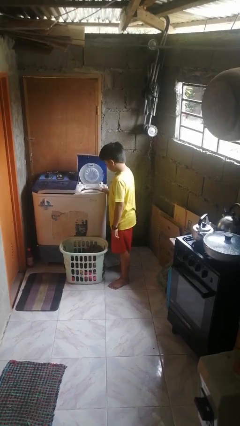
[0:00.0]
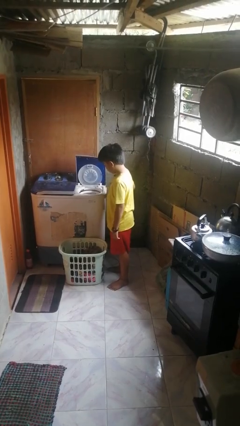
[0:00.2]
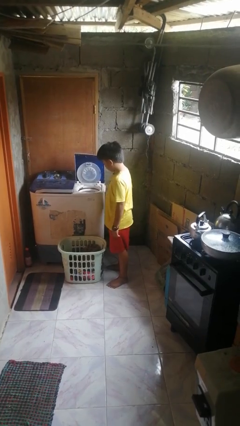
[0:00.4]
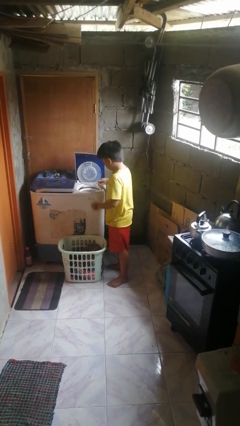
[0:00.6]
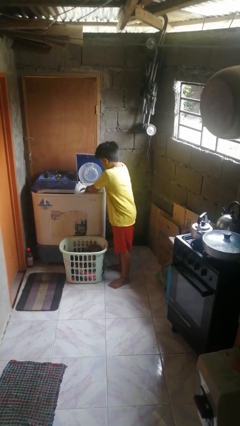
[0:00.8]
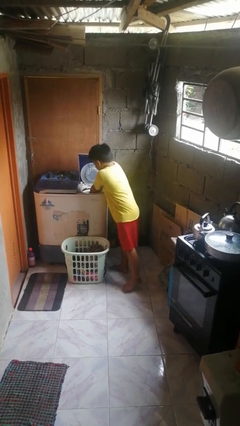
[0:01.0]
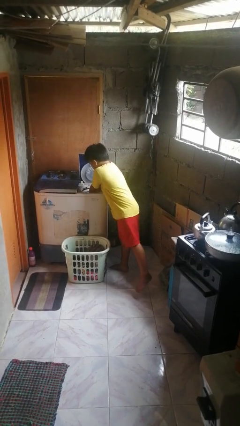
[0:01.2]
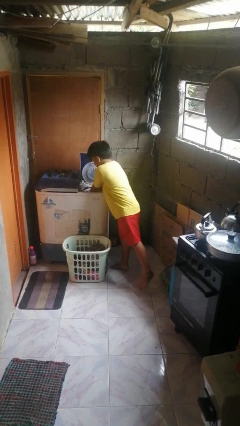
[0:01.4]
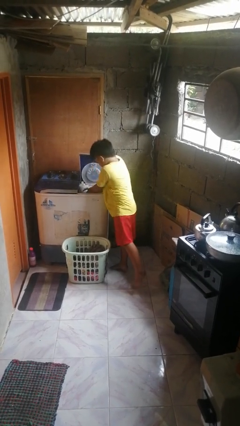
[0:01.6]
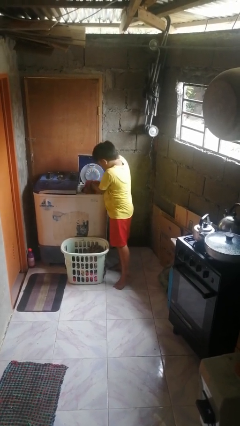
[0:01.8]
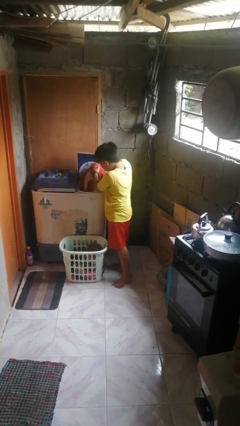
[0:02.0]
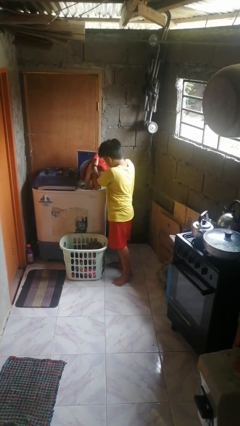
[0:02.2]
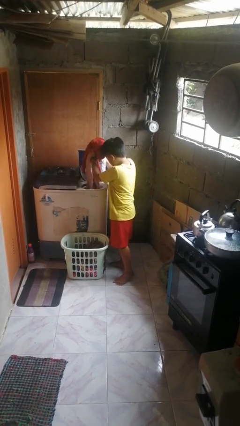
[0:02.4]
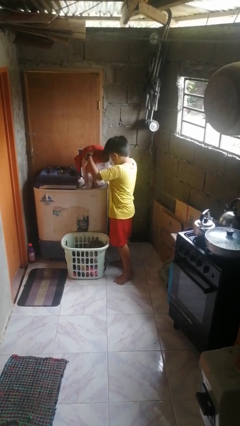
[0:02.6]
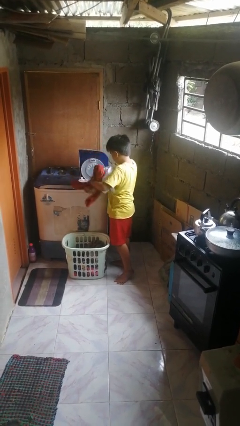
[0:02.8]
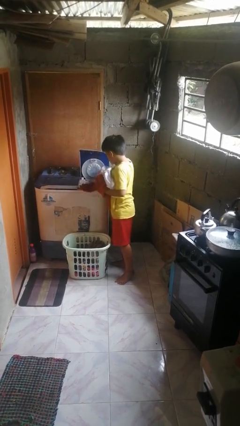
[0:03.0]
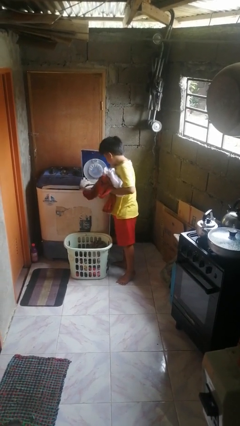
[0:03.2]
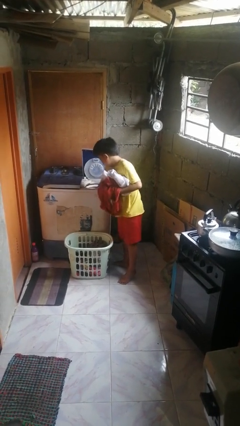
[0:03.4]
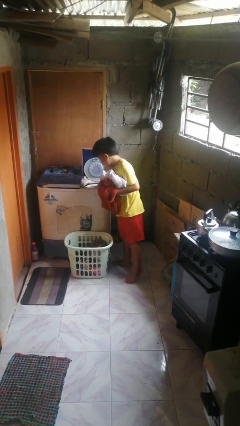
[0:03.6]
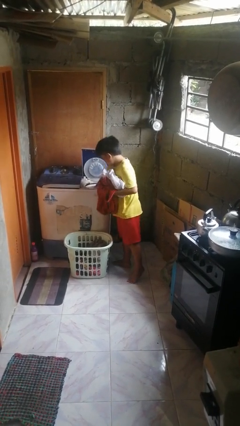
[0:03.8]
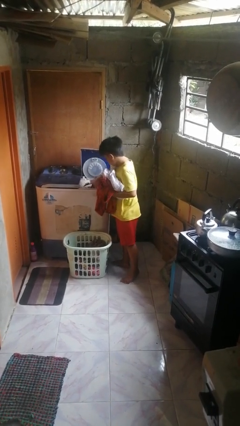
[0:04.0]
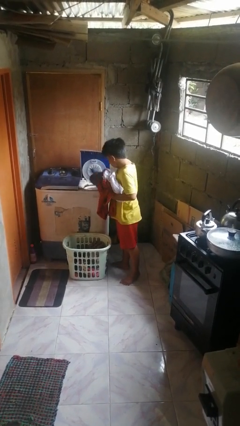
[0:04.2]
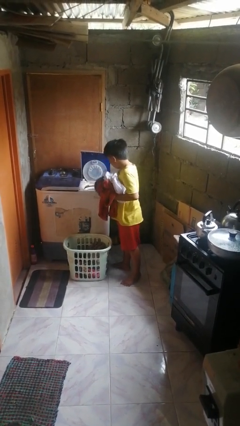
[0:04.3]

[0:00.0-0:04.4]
person unloads dryer

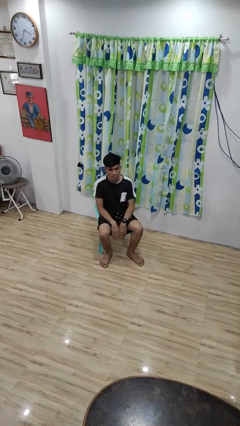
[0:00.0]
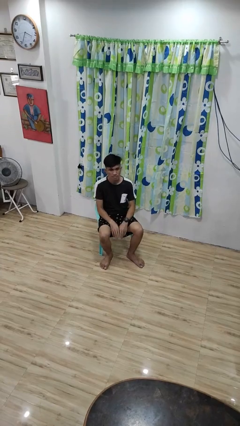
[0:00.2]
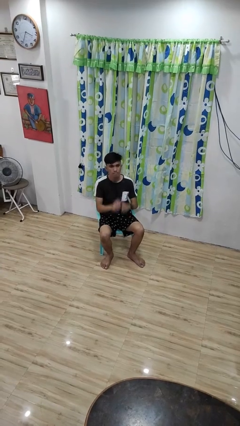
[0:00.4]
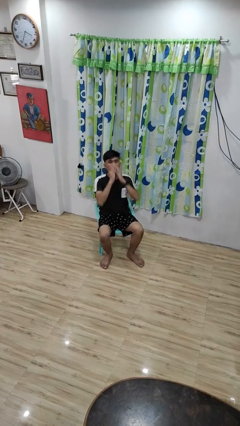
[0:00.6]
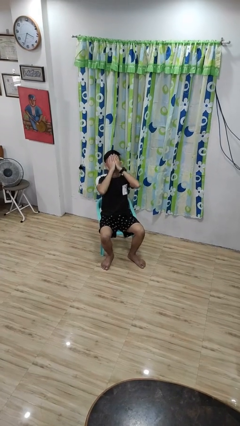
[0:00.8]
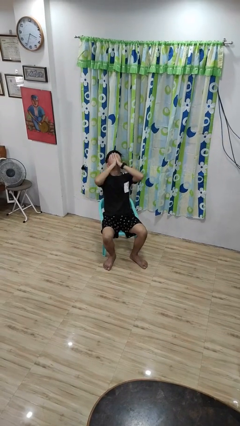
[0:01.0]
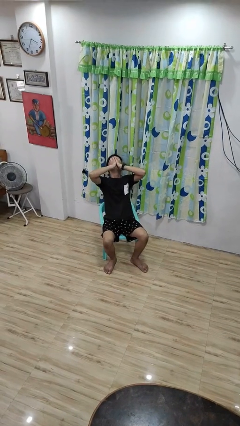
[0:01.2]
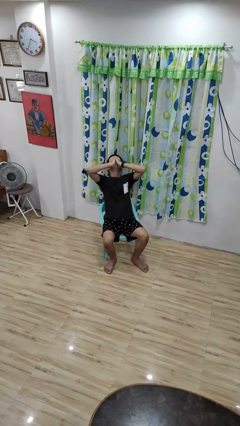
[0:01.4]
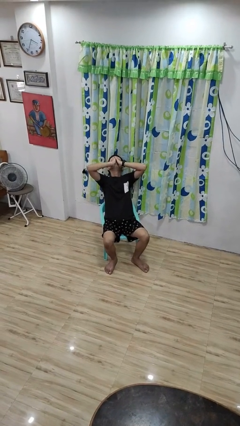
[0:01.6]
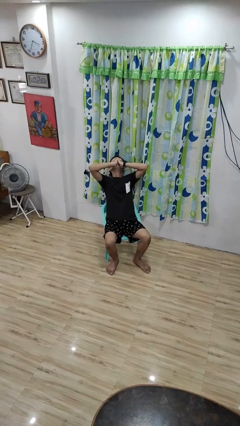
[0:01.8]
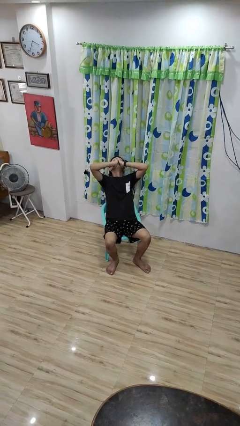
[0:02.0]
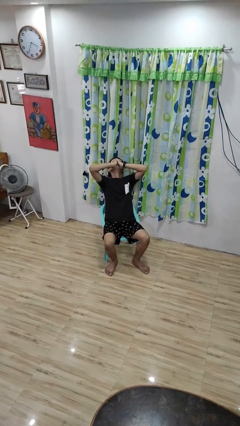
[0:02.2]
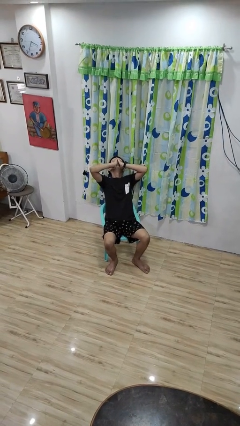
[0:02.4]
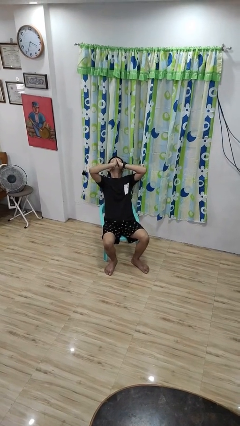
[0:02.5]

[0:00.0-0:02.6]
person covers face with hands

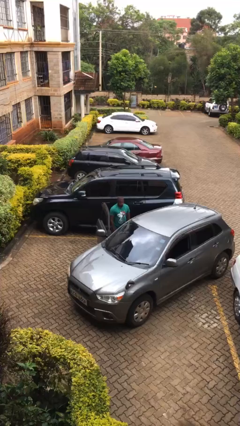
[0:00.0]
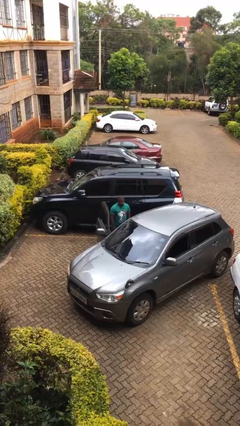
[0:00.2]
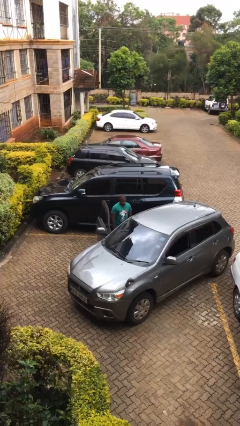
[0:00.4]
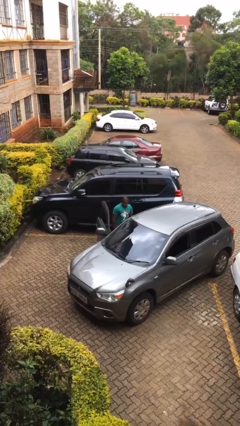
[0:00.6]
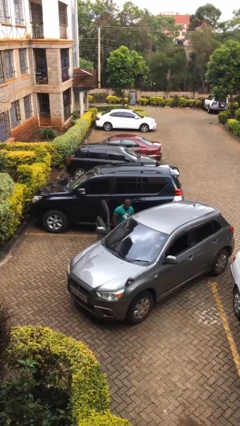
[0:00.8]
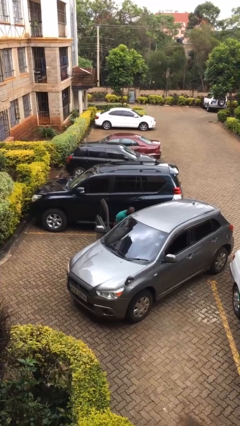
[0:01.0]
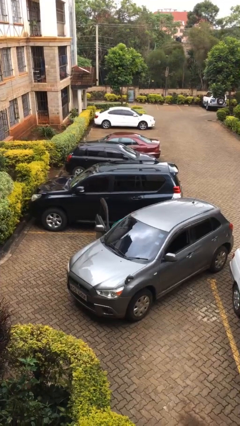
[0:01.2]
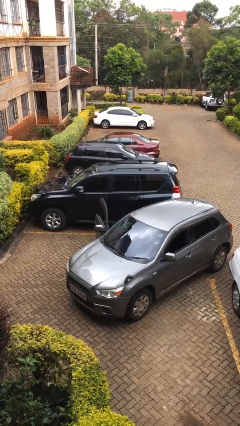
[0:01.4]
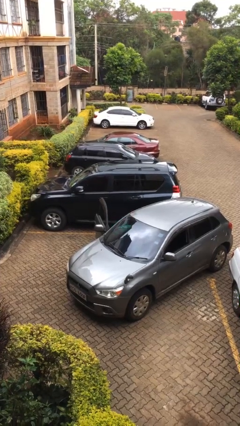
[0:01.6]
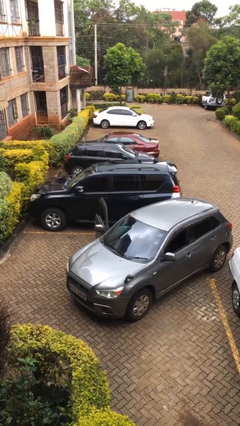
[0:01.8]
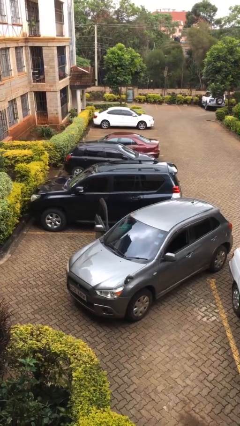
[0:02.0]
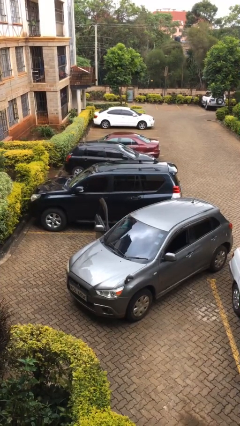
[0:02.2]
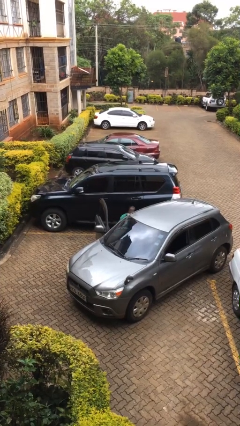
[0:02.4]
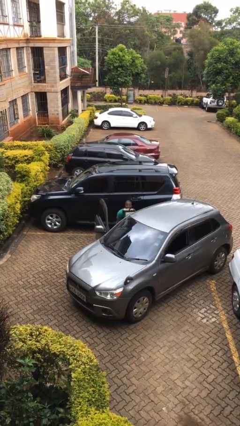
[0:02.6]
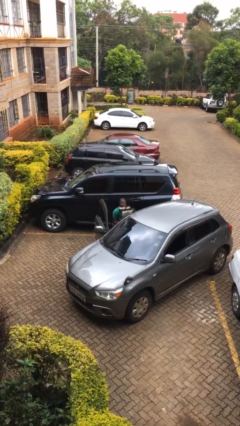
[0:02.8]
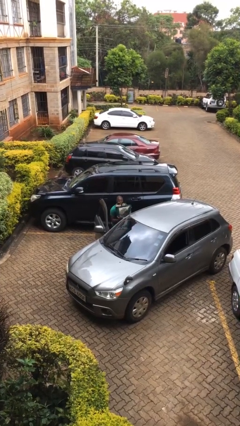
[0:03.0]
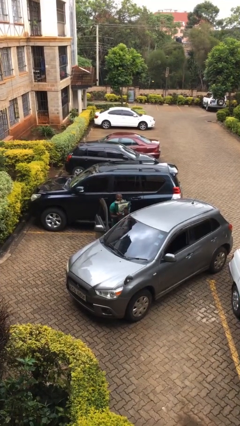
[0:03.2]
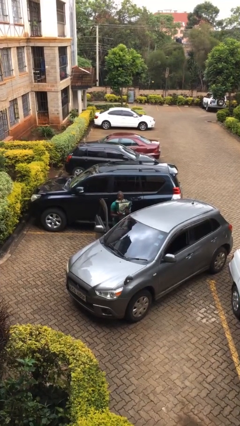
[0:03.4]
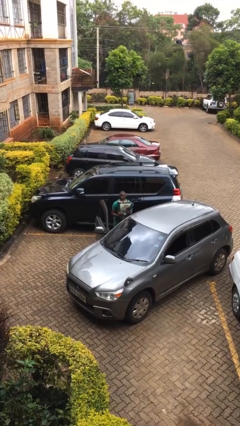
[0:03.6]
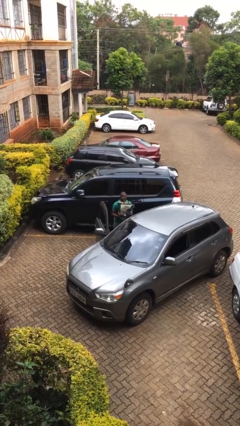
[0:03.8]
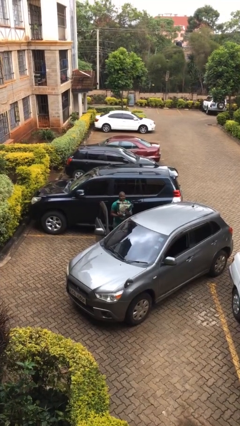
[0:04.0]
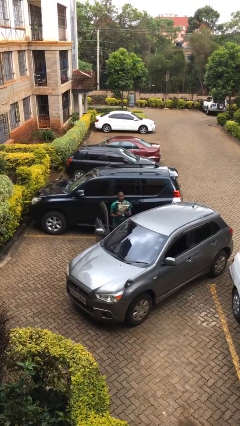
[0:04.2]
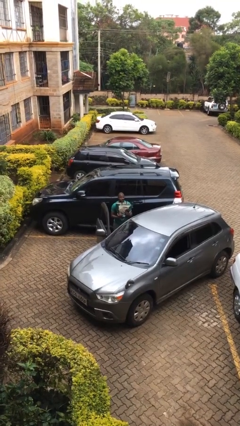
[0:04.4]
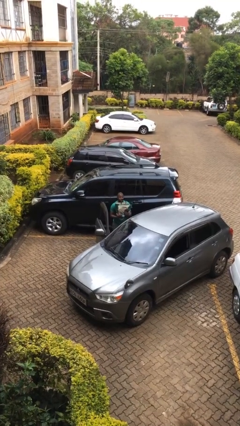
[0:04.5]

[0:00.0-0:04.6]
person unloads car

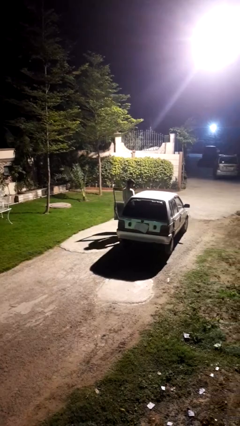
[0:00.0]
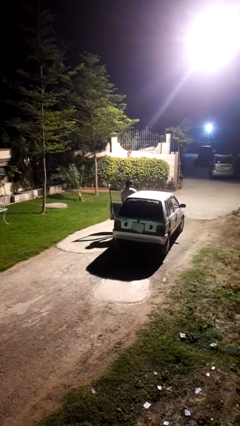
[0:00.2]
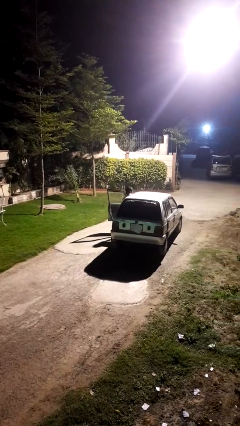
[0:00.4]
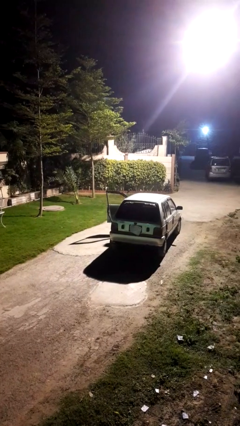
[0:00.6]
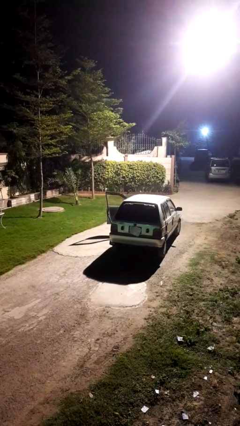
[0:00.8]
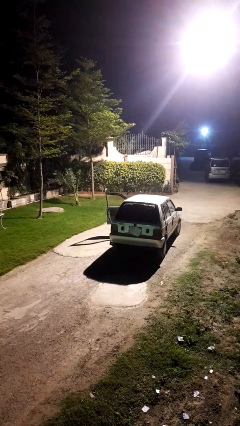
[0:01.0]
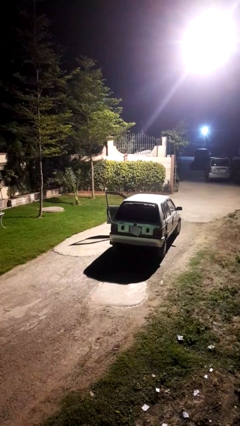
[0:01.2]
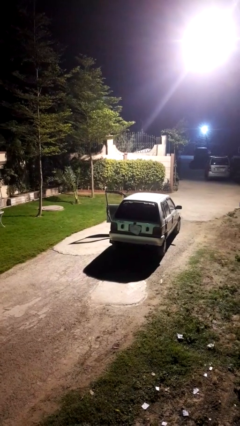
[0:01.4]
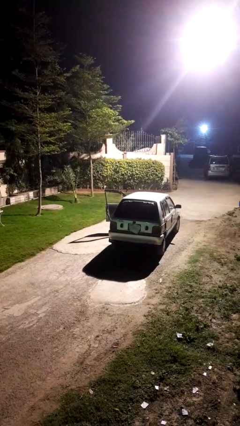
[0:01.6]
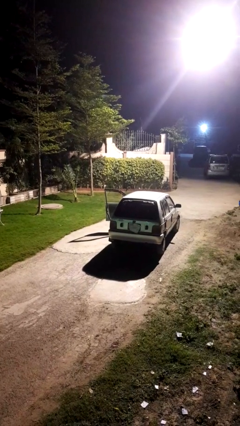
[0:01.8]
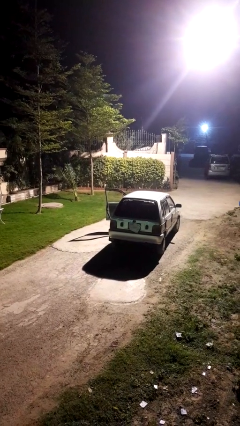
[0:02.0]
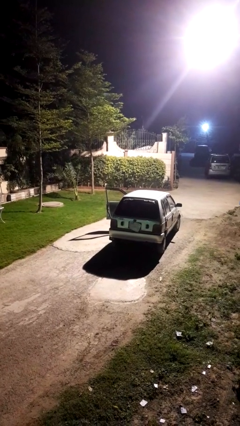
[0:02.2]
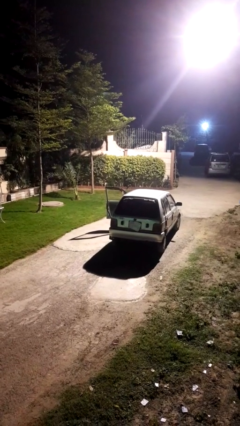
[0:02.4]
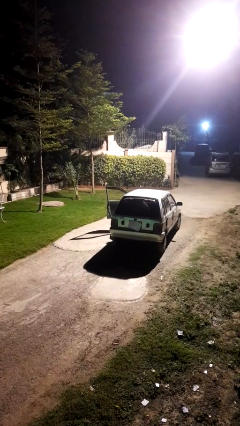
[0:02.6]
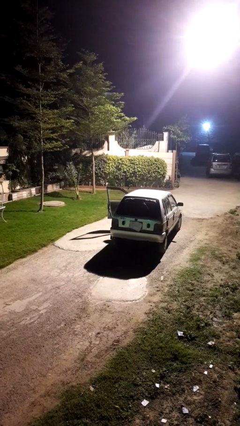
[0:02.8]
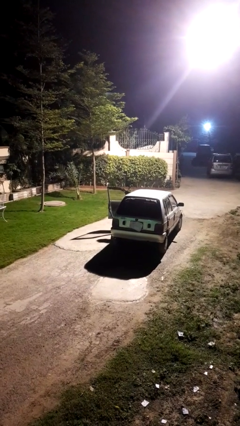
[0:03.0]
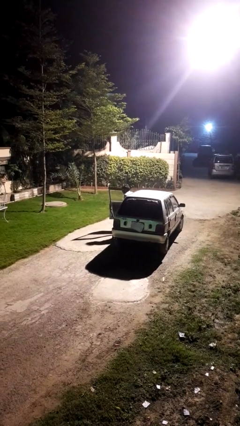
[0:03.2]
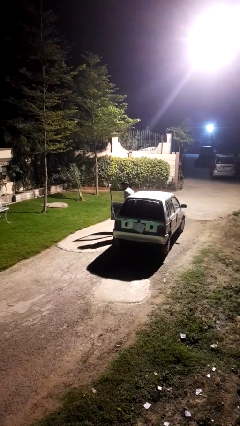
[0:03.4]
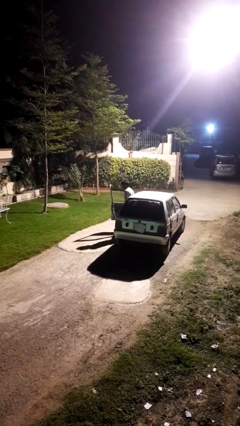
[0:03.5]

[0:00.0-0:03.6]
person enters car

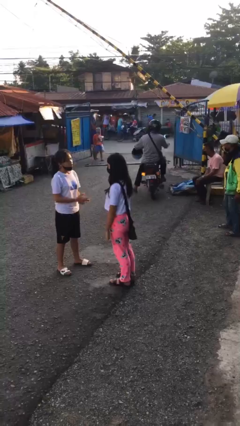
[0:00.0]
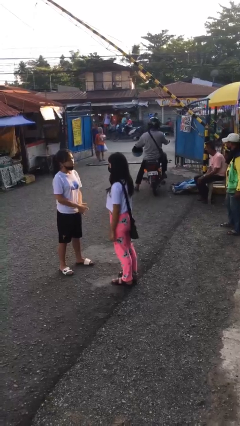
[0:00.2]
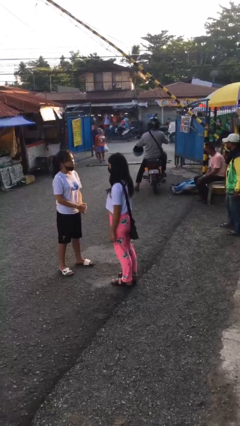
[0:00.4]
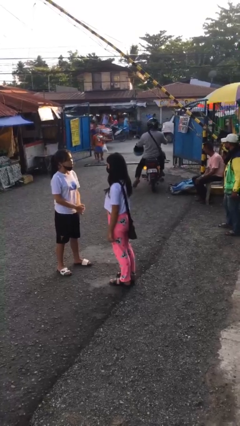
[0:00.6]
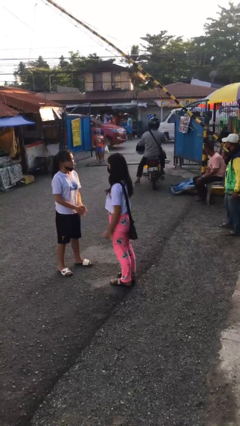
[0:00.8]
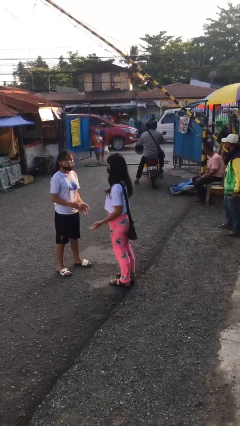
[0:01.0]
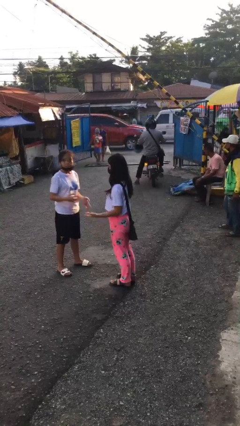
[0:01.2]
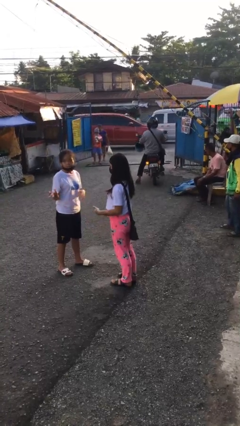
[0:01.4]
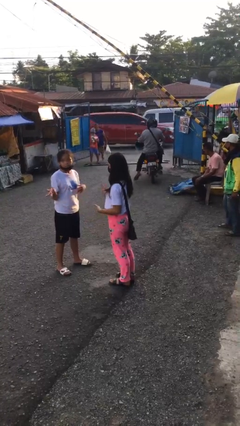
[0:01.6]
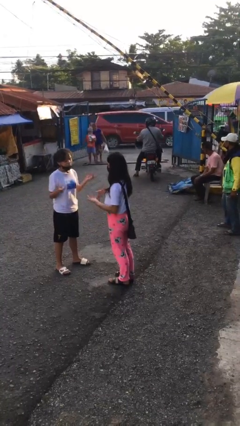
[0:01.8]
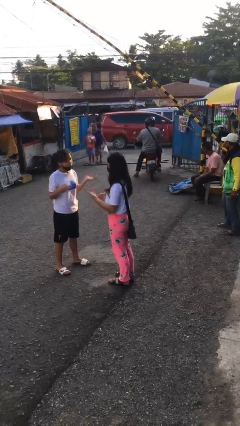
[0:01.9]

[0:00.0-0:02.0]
person talks to person
